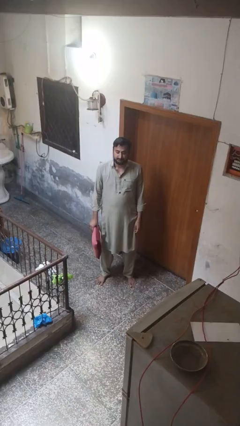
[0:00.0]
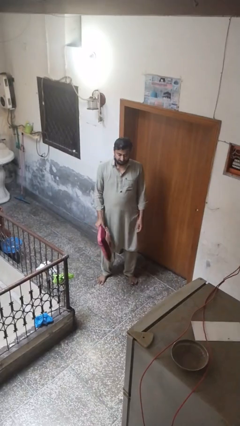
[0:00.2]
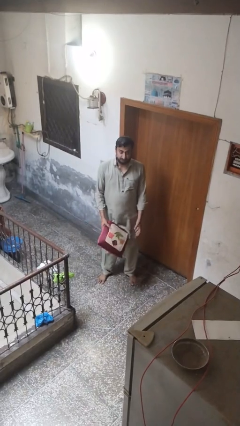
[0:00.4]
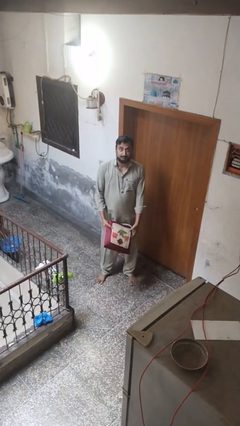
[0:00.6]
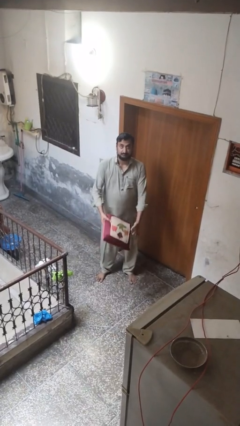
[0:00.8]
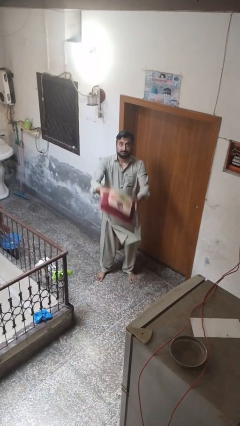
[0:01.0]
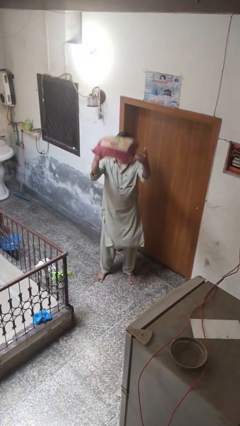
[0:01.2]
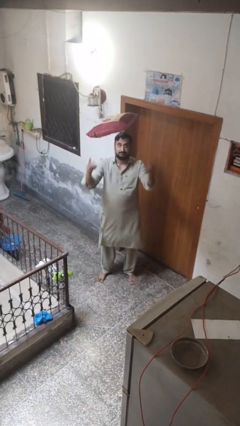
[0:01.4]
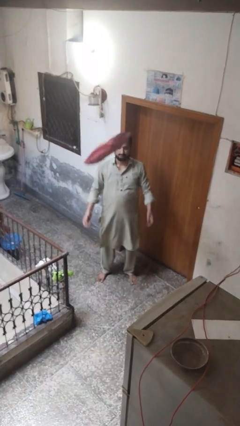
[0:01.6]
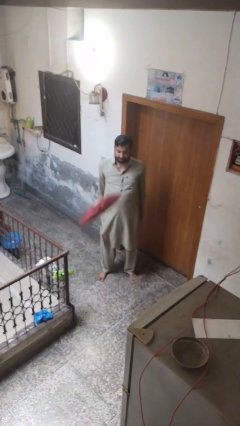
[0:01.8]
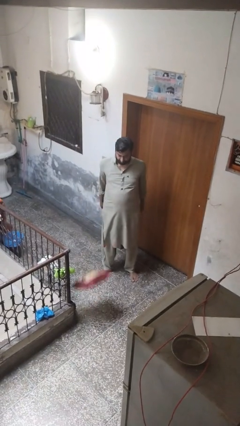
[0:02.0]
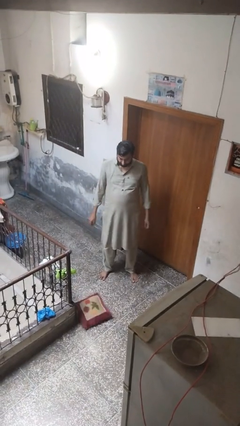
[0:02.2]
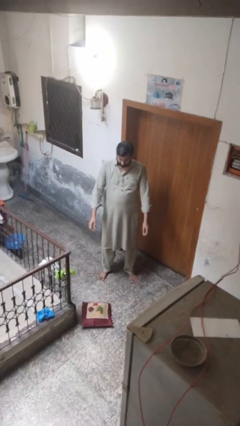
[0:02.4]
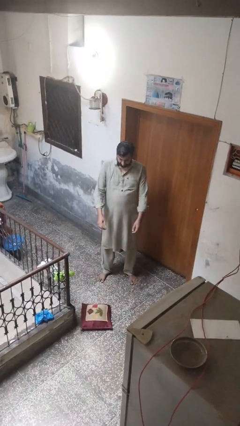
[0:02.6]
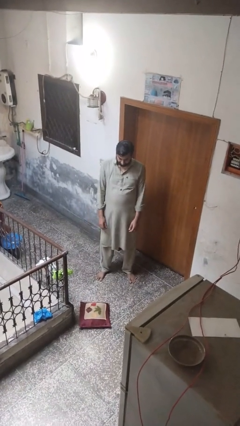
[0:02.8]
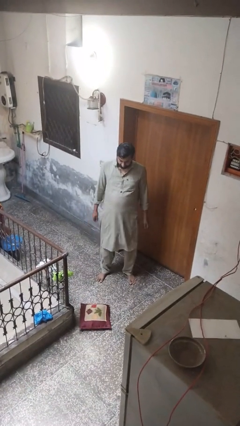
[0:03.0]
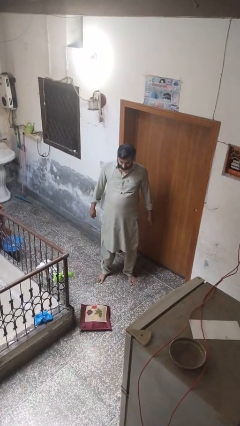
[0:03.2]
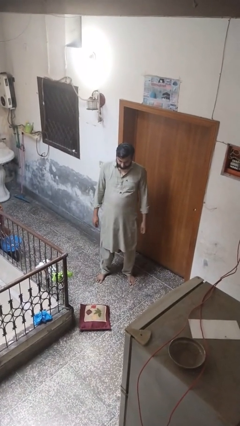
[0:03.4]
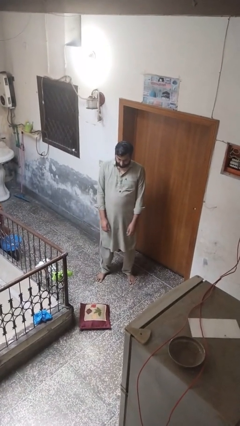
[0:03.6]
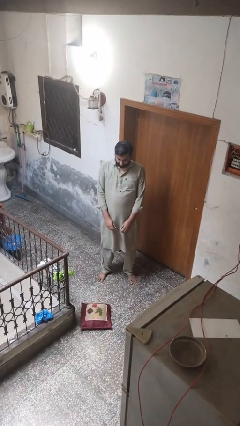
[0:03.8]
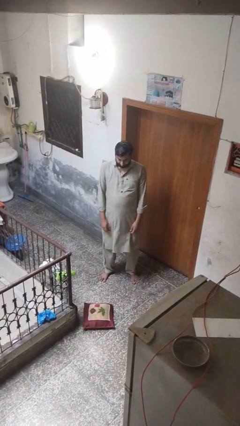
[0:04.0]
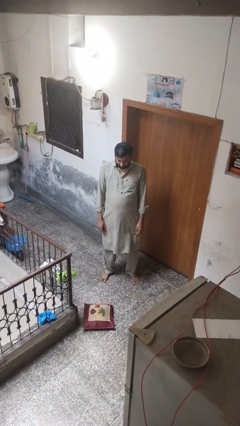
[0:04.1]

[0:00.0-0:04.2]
person throws object into air

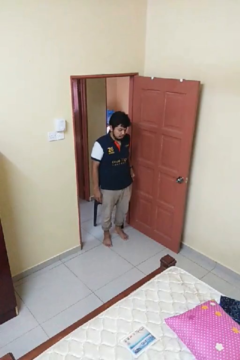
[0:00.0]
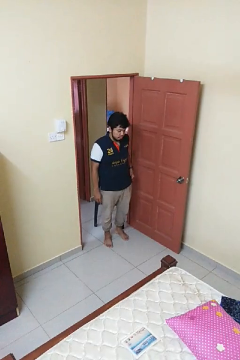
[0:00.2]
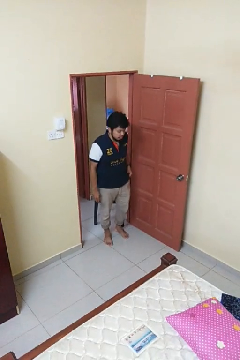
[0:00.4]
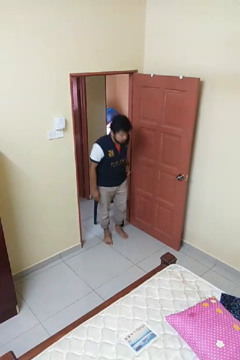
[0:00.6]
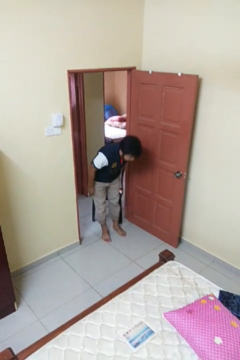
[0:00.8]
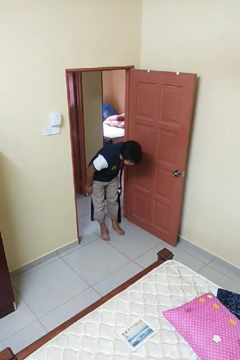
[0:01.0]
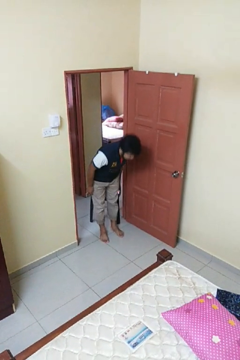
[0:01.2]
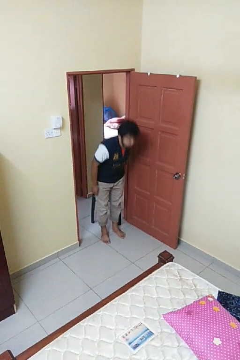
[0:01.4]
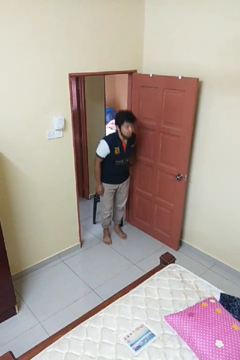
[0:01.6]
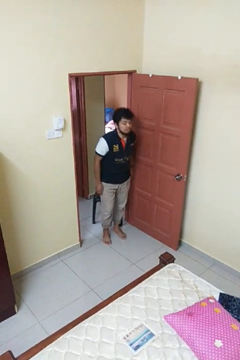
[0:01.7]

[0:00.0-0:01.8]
person bows

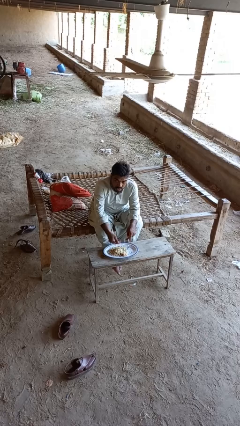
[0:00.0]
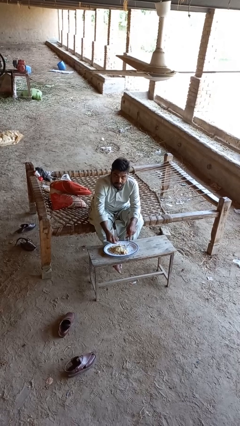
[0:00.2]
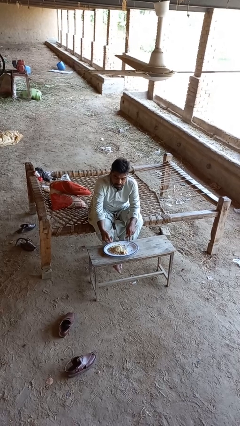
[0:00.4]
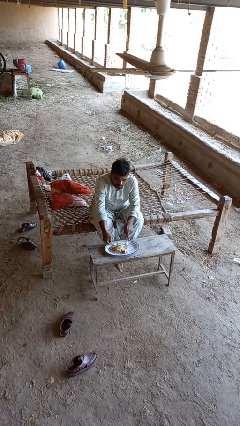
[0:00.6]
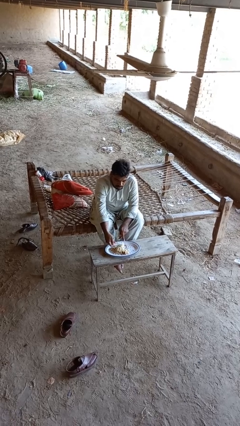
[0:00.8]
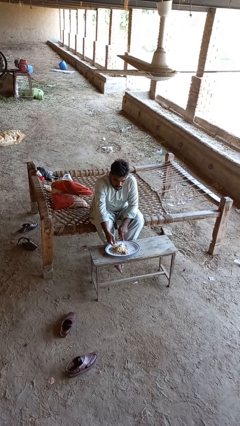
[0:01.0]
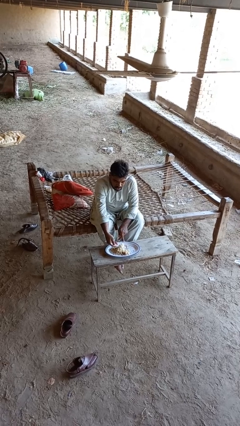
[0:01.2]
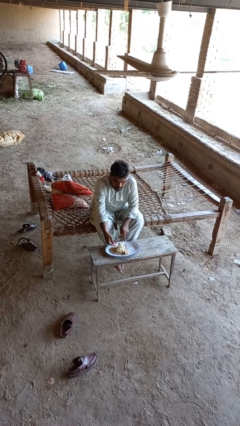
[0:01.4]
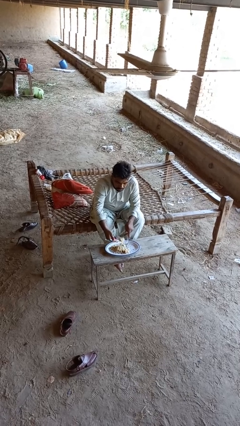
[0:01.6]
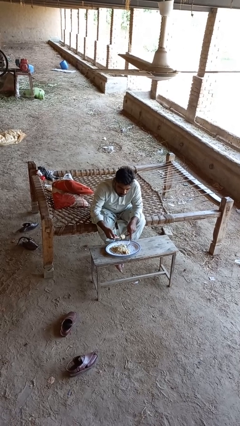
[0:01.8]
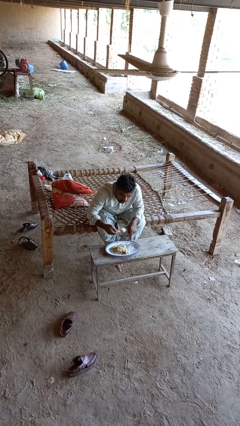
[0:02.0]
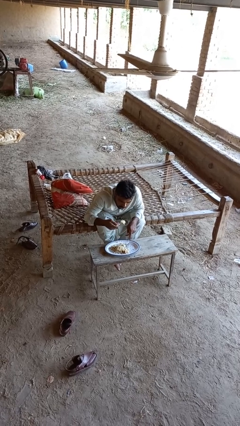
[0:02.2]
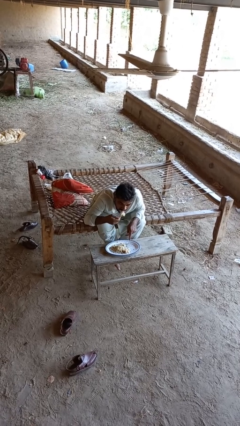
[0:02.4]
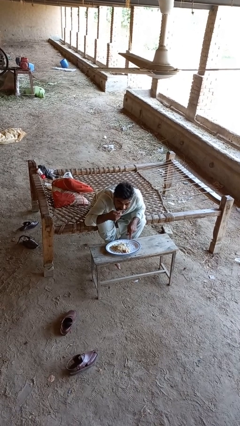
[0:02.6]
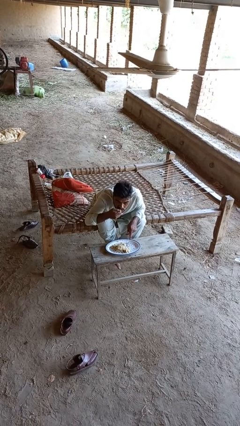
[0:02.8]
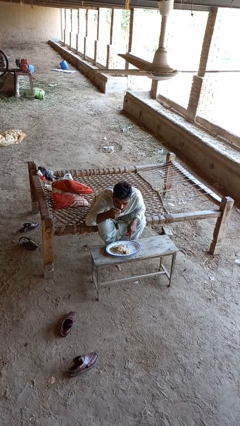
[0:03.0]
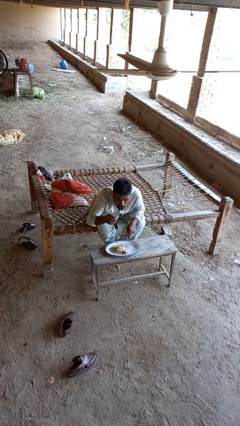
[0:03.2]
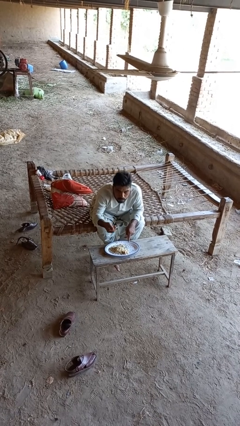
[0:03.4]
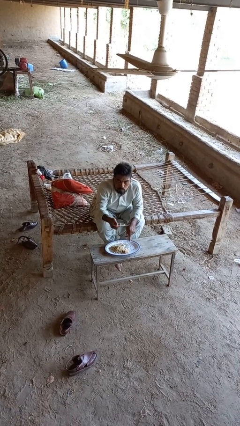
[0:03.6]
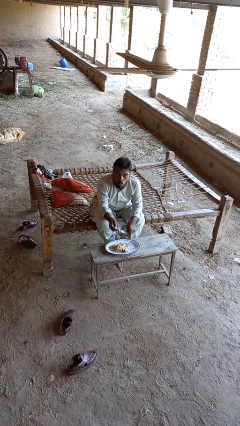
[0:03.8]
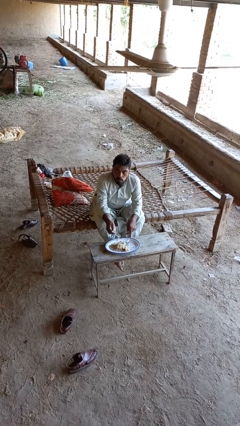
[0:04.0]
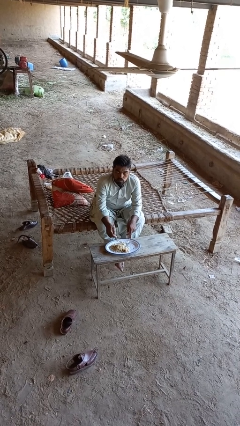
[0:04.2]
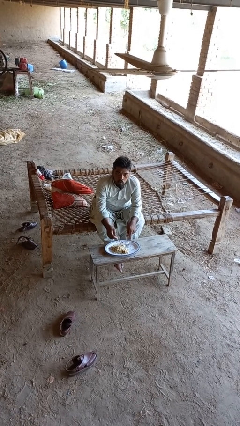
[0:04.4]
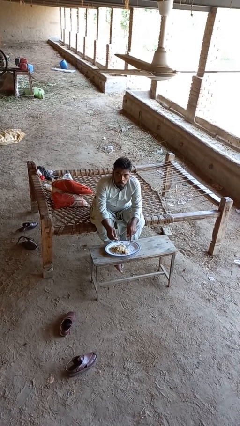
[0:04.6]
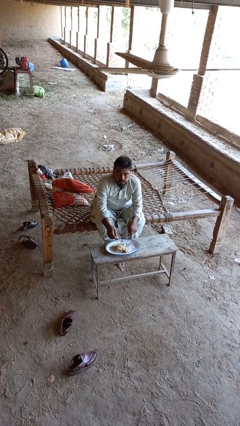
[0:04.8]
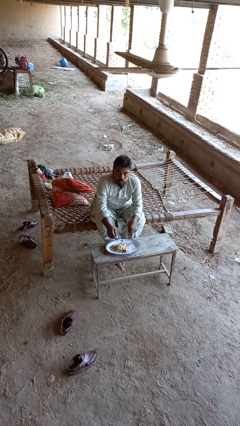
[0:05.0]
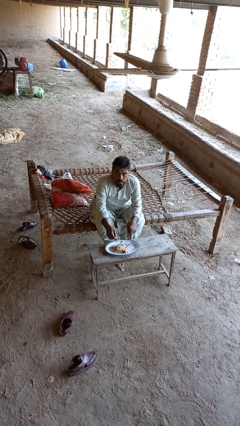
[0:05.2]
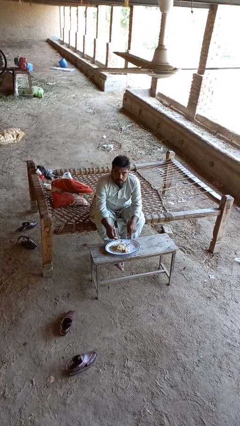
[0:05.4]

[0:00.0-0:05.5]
person eats with utensil

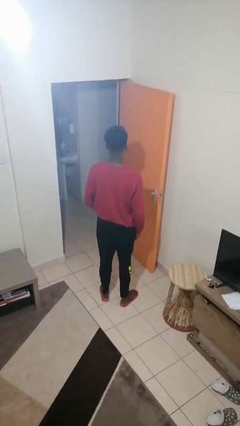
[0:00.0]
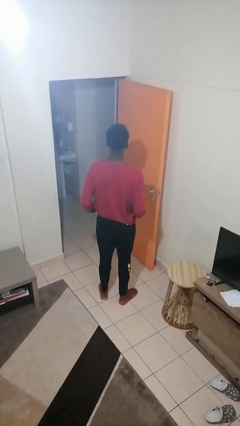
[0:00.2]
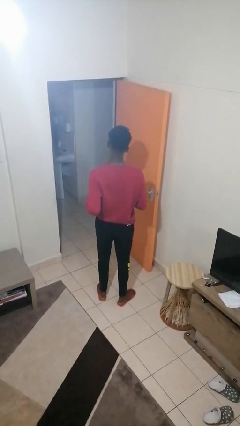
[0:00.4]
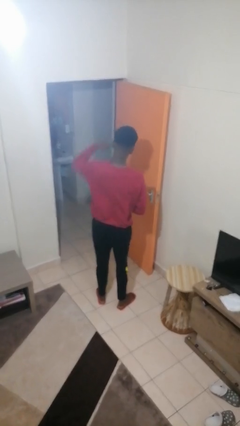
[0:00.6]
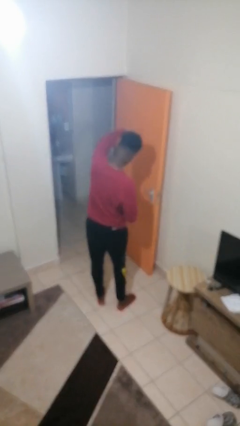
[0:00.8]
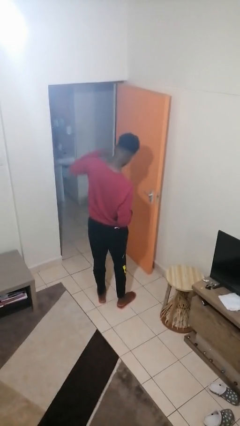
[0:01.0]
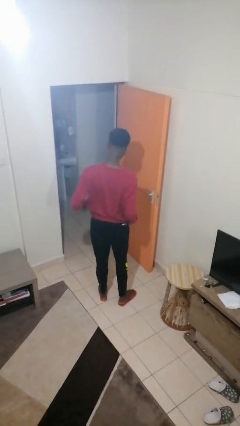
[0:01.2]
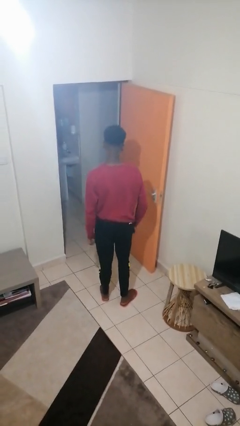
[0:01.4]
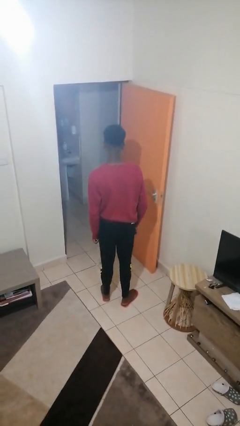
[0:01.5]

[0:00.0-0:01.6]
person punches

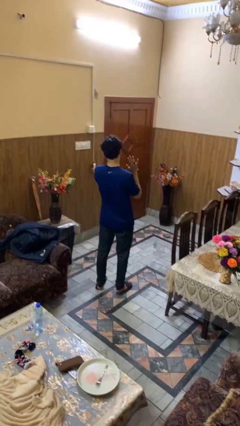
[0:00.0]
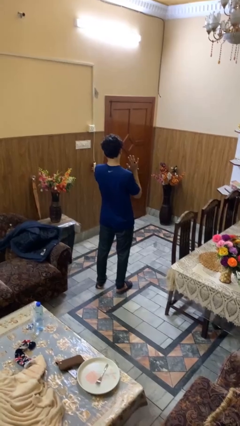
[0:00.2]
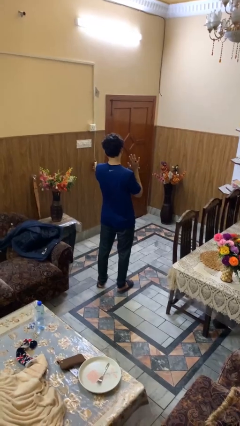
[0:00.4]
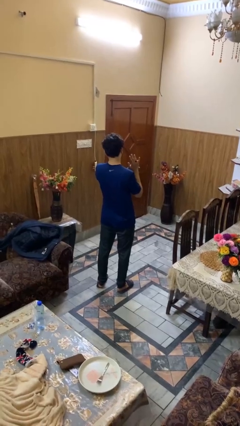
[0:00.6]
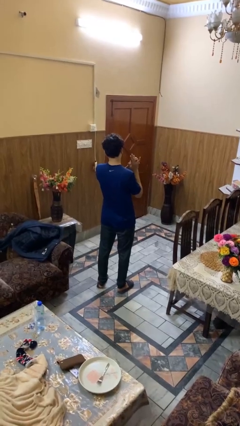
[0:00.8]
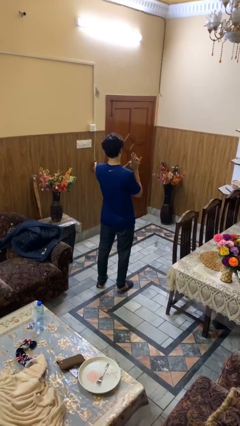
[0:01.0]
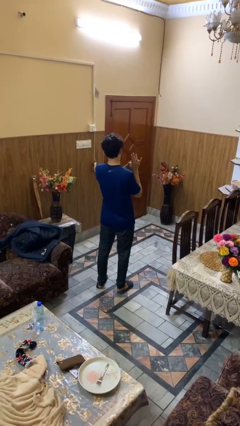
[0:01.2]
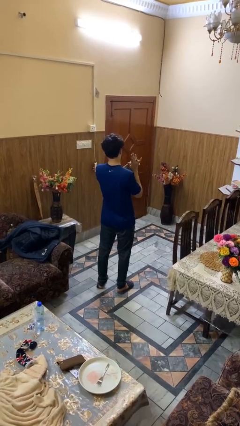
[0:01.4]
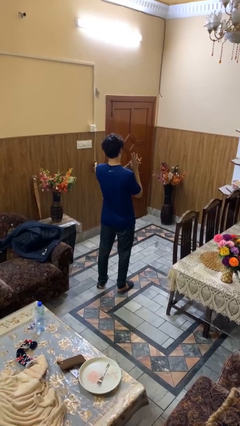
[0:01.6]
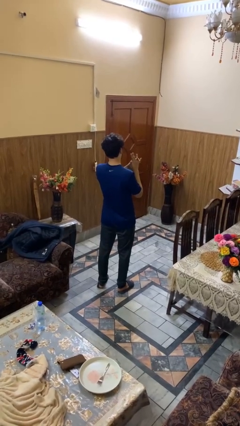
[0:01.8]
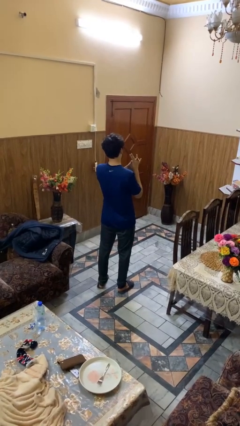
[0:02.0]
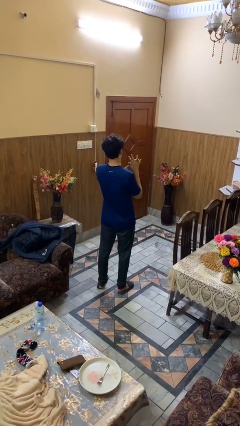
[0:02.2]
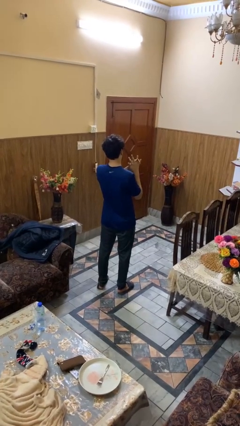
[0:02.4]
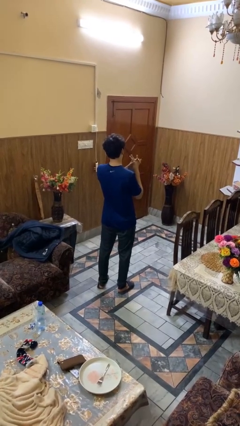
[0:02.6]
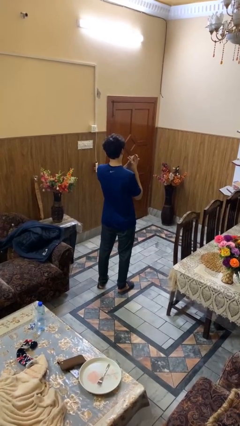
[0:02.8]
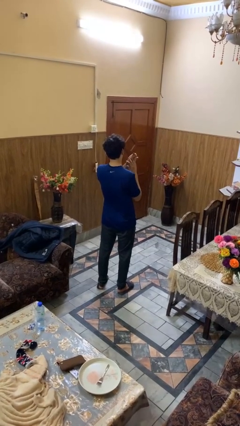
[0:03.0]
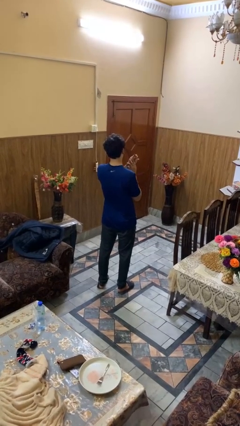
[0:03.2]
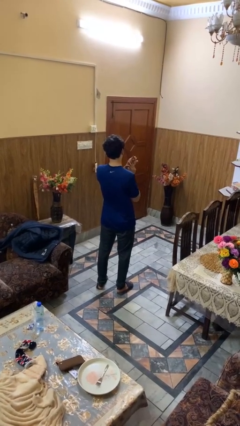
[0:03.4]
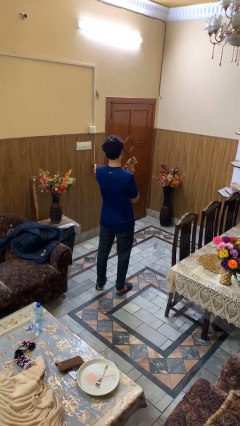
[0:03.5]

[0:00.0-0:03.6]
person takes off ring

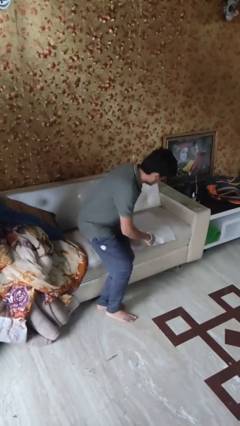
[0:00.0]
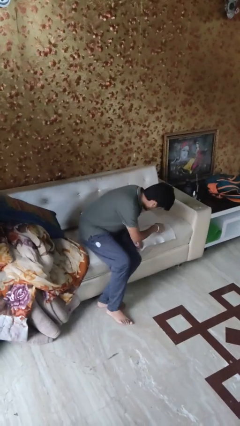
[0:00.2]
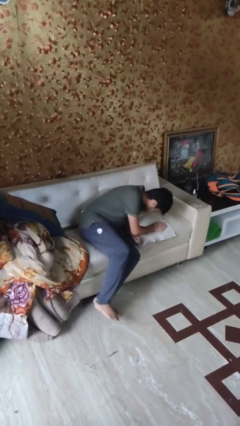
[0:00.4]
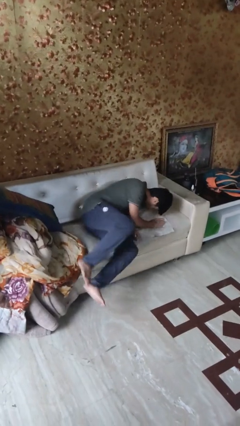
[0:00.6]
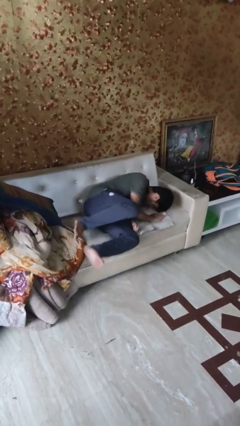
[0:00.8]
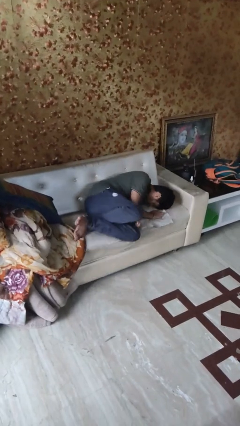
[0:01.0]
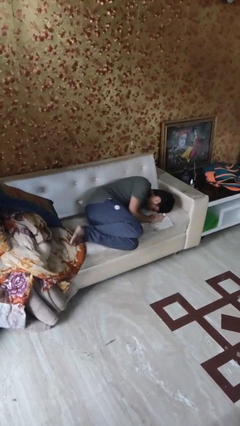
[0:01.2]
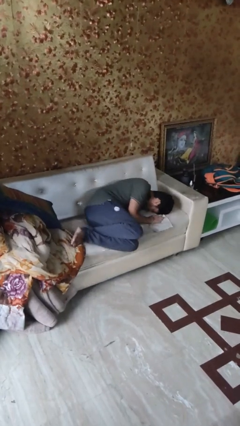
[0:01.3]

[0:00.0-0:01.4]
person lies down on couch
